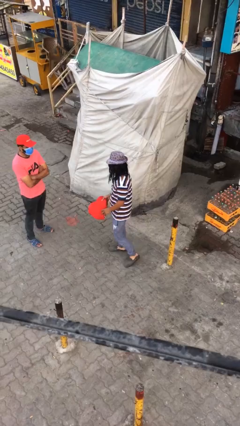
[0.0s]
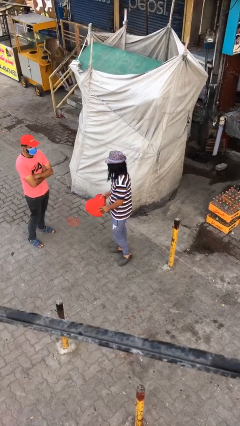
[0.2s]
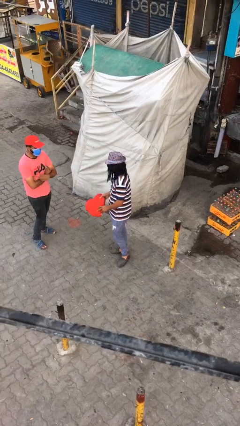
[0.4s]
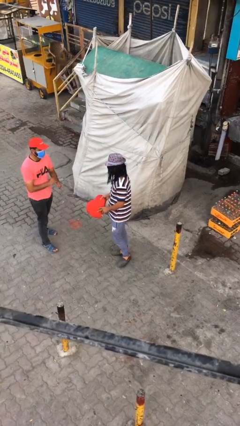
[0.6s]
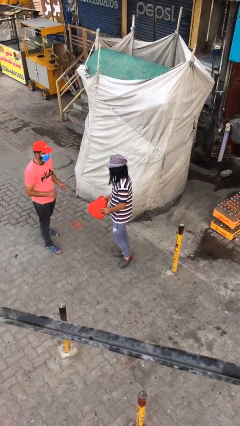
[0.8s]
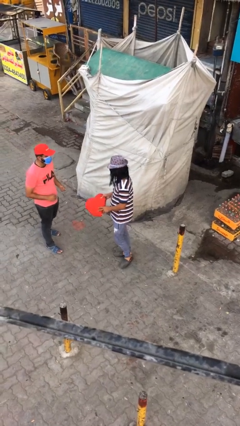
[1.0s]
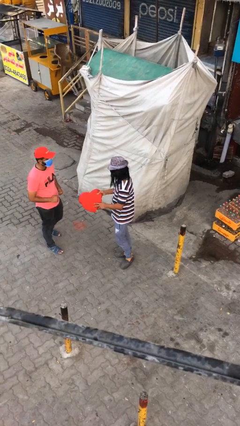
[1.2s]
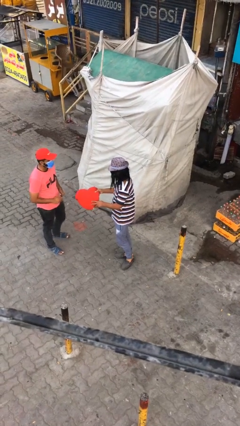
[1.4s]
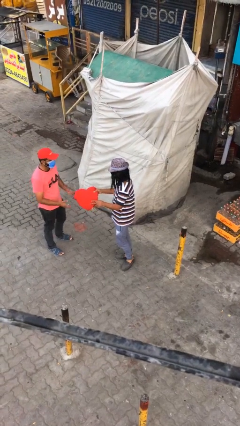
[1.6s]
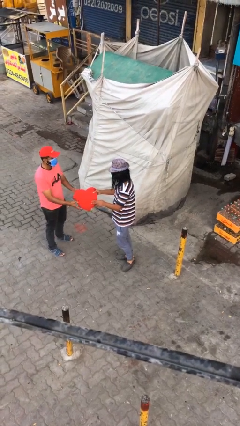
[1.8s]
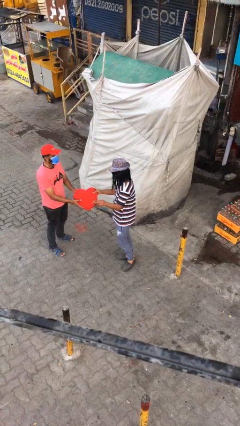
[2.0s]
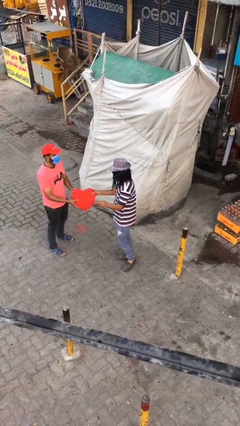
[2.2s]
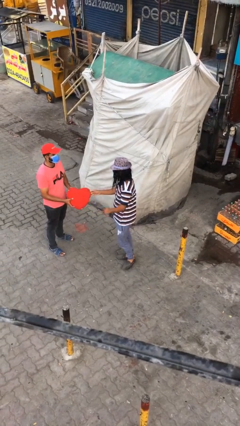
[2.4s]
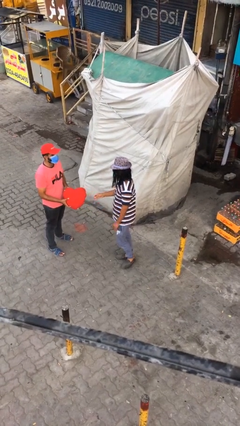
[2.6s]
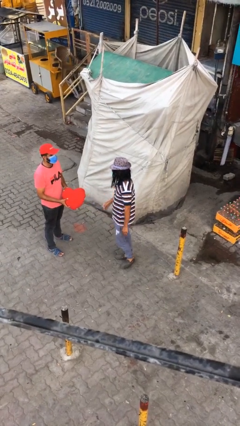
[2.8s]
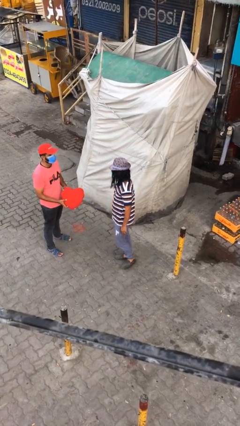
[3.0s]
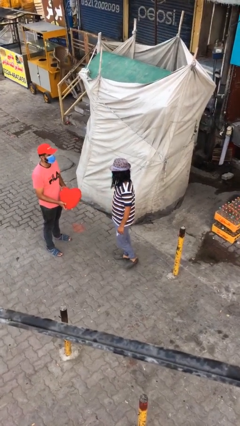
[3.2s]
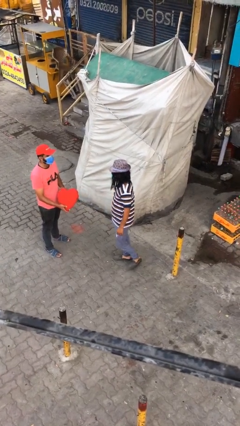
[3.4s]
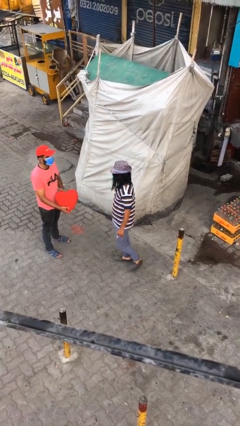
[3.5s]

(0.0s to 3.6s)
person transfers object to person

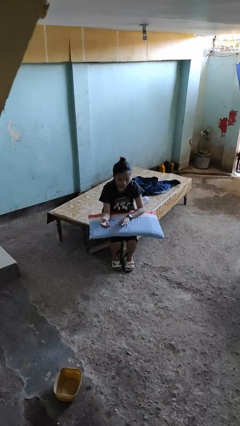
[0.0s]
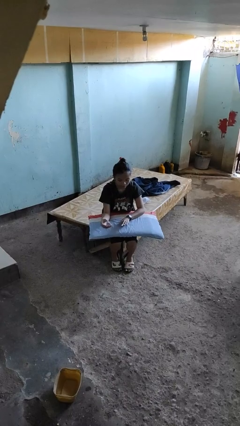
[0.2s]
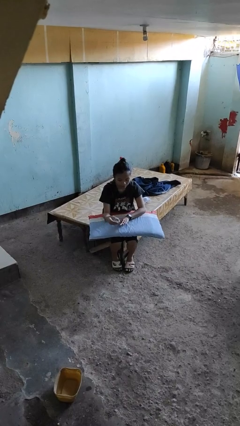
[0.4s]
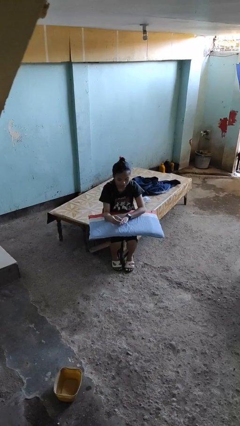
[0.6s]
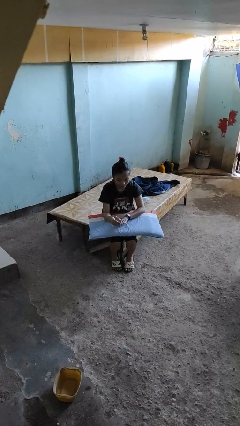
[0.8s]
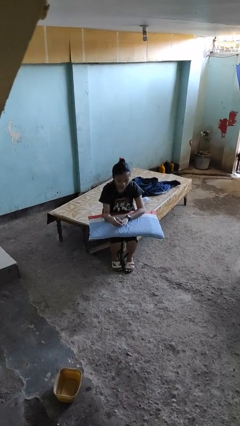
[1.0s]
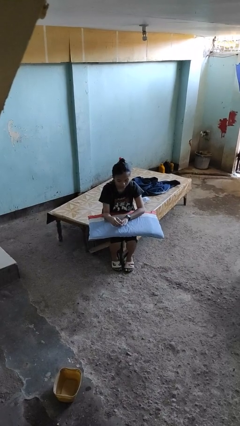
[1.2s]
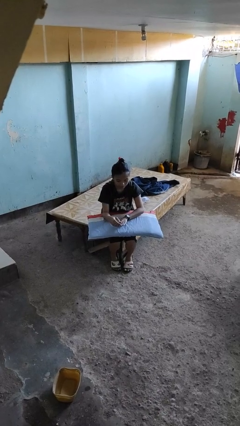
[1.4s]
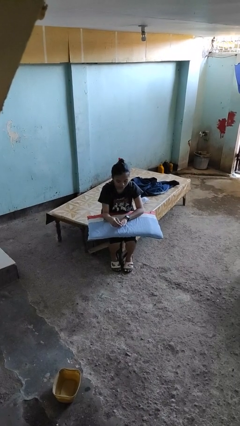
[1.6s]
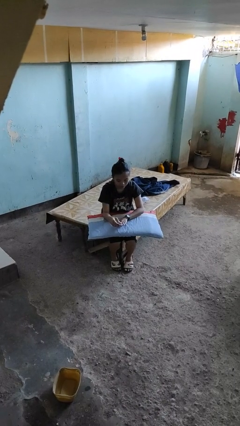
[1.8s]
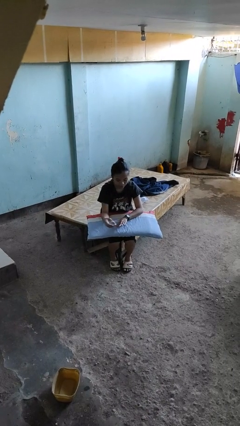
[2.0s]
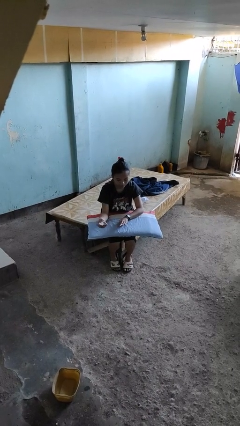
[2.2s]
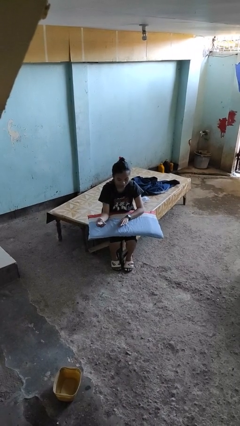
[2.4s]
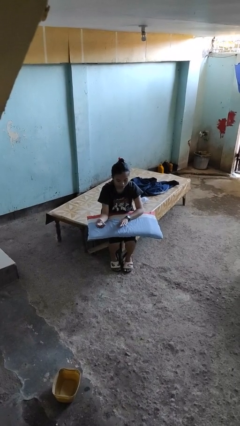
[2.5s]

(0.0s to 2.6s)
person clips fingernails

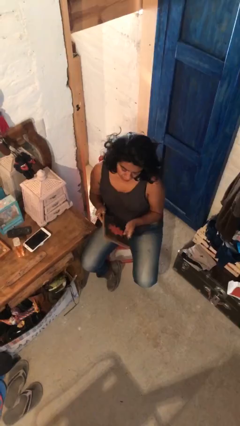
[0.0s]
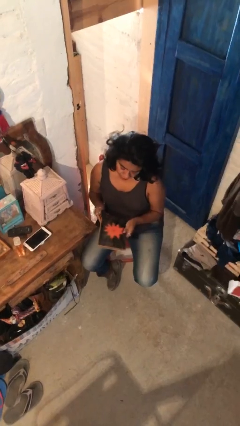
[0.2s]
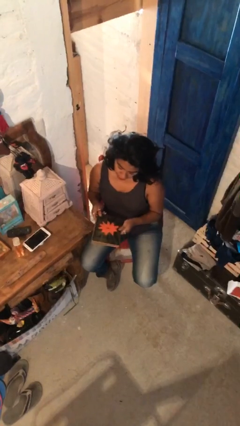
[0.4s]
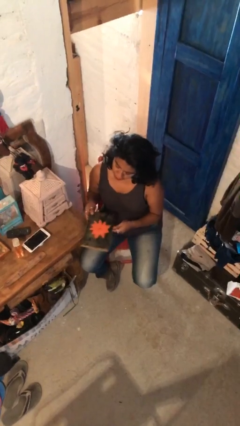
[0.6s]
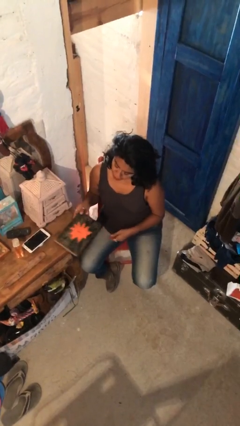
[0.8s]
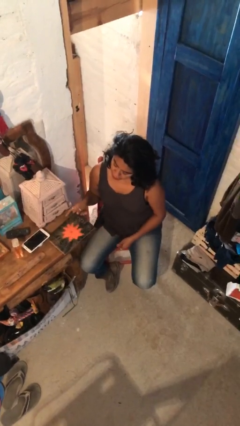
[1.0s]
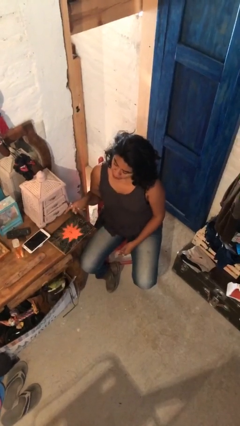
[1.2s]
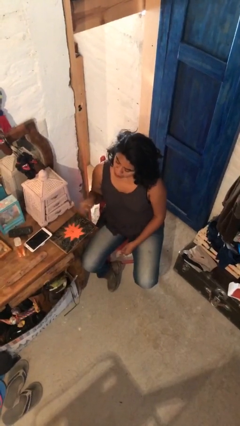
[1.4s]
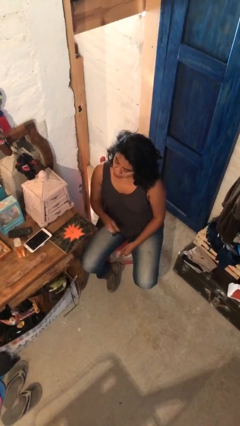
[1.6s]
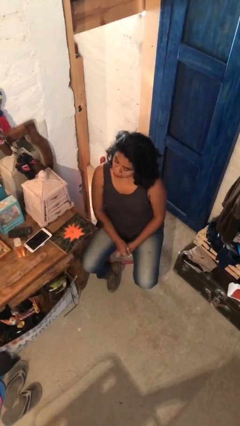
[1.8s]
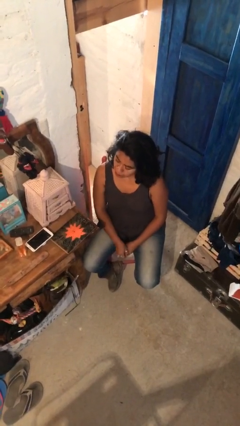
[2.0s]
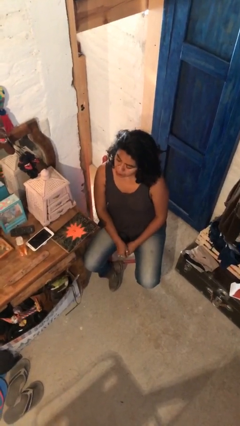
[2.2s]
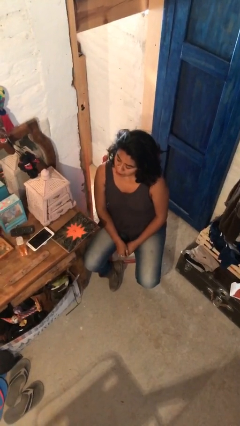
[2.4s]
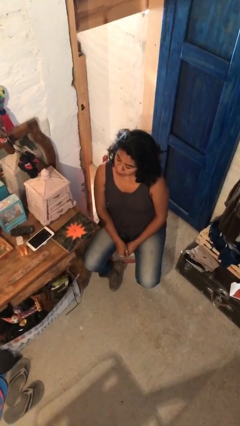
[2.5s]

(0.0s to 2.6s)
person puts down object on table

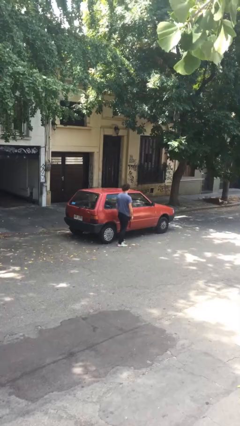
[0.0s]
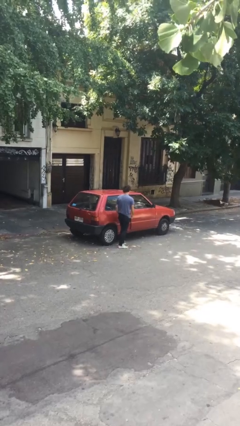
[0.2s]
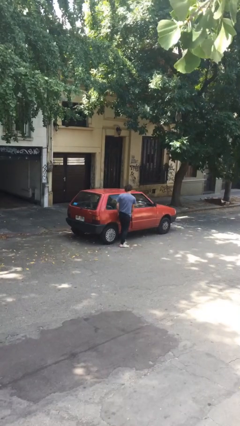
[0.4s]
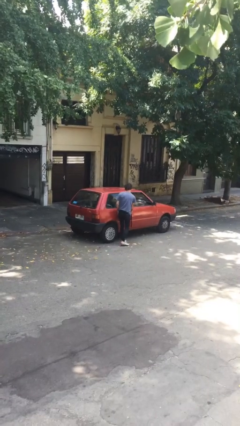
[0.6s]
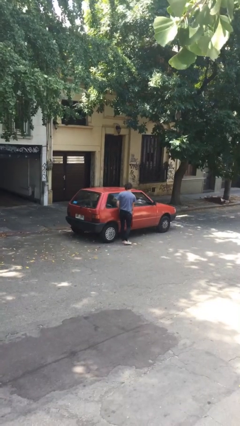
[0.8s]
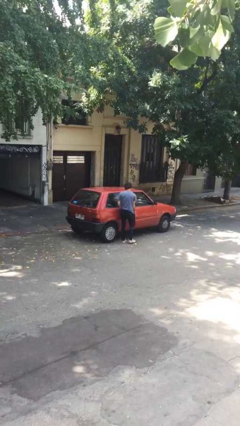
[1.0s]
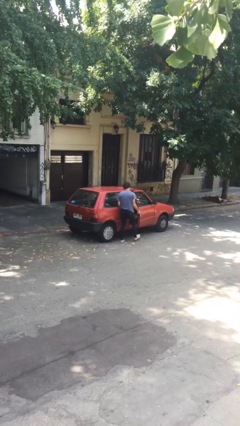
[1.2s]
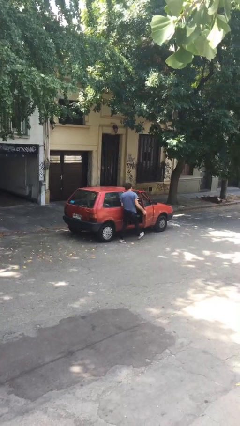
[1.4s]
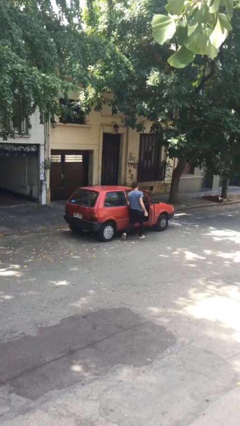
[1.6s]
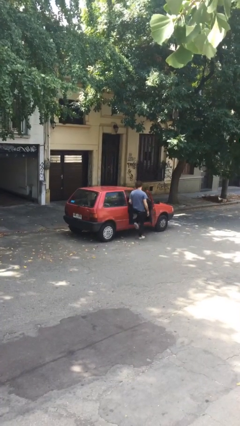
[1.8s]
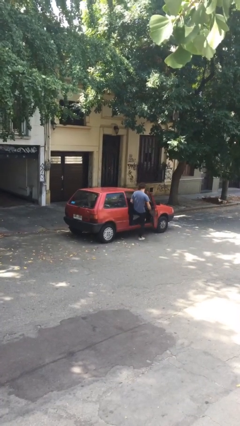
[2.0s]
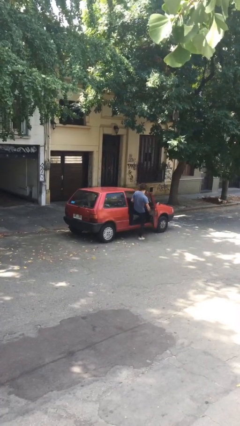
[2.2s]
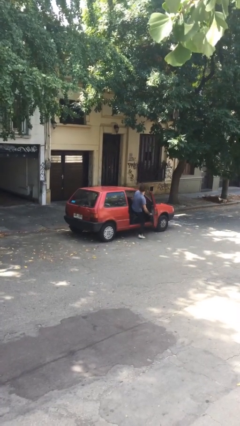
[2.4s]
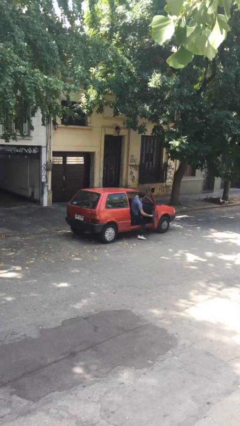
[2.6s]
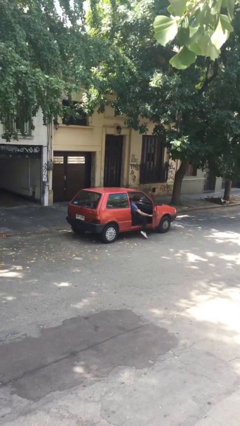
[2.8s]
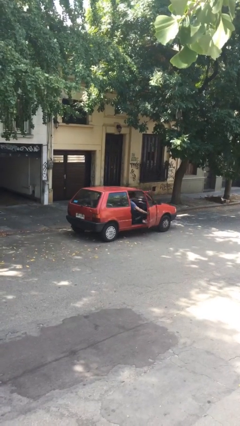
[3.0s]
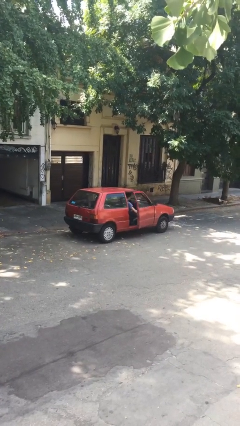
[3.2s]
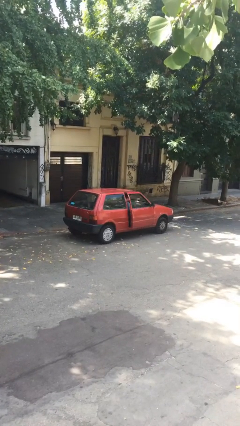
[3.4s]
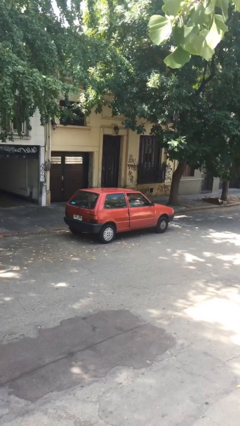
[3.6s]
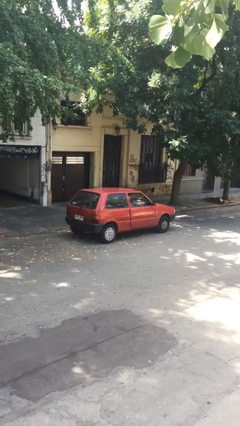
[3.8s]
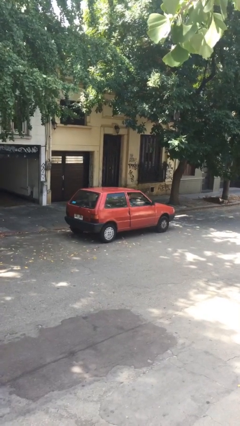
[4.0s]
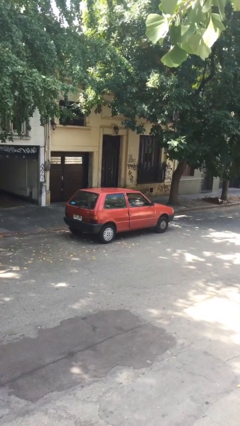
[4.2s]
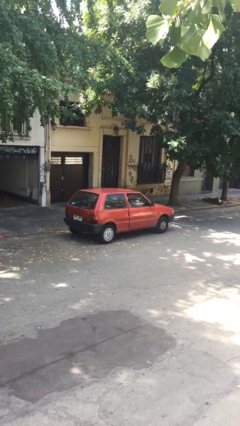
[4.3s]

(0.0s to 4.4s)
car picks up person

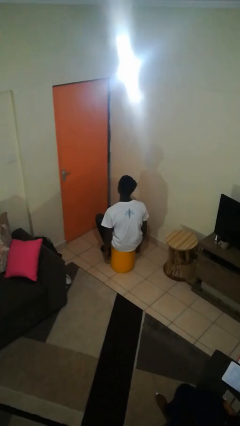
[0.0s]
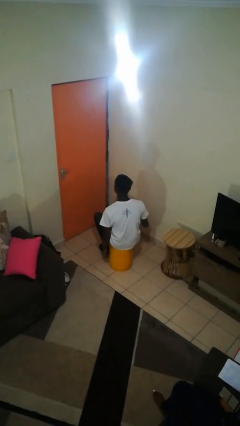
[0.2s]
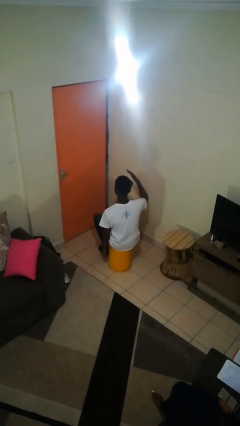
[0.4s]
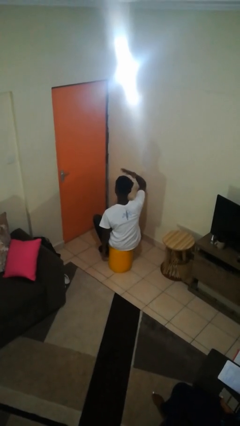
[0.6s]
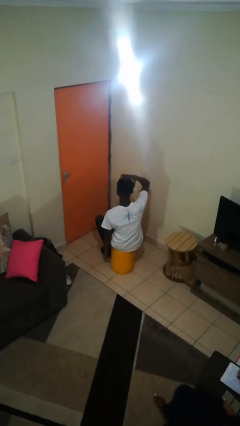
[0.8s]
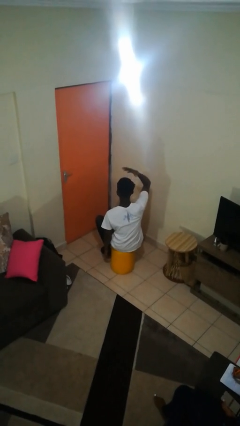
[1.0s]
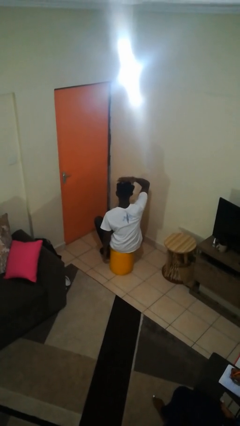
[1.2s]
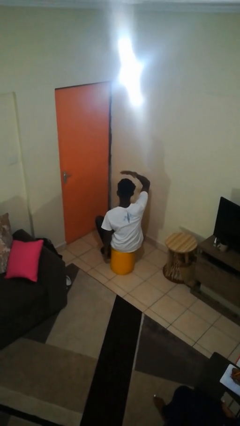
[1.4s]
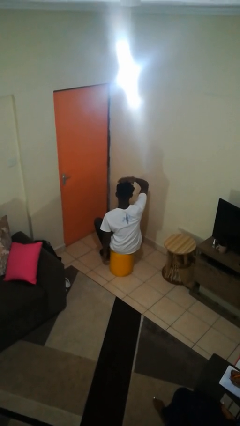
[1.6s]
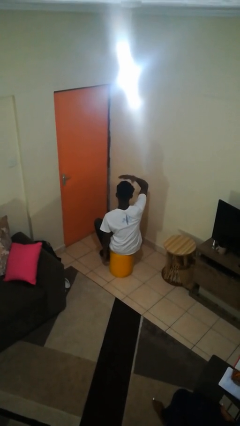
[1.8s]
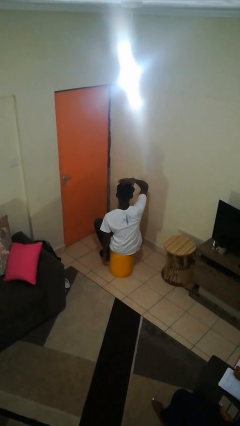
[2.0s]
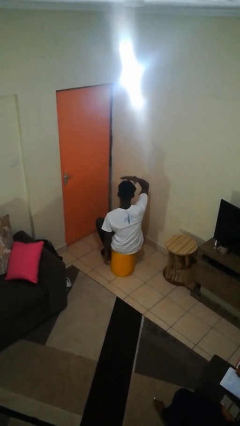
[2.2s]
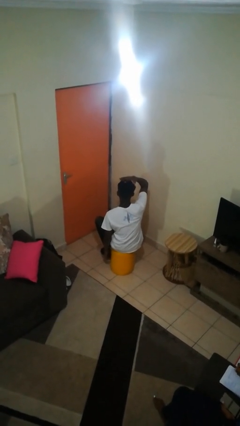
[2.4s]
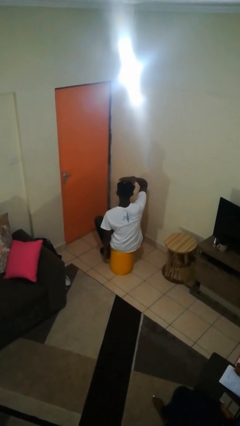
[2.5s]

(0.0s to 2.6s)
person pats head

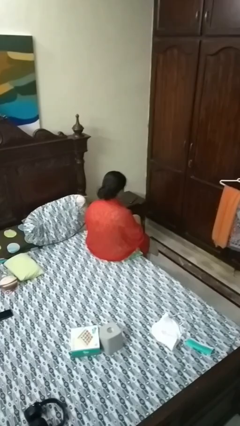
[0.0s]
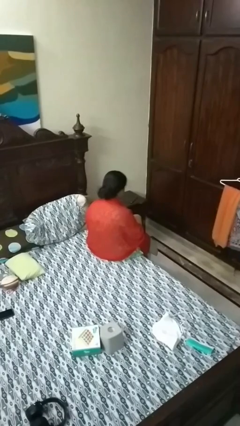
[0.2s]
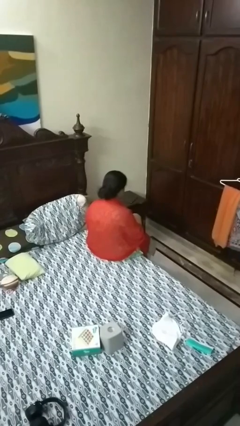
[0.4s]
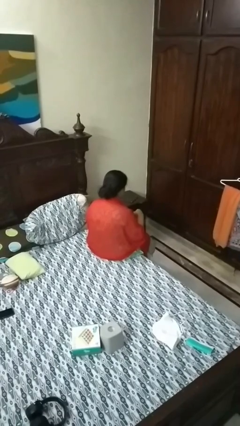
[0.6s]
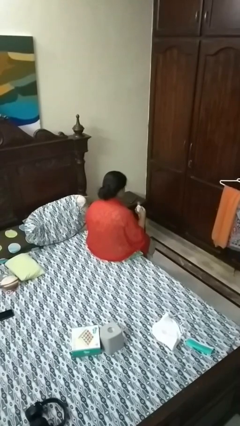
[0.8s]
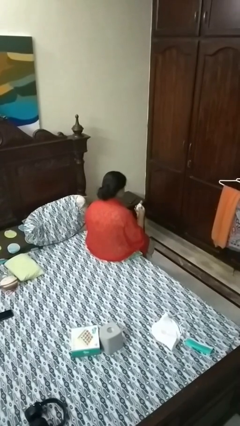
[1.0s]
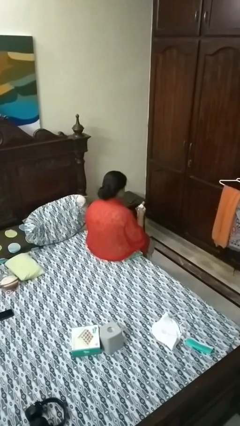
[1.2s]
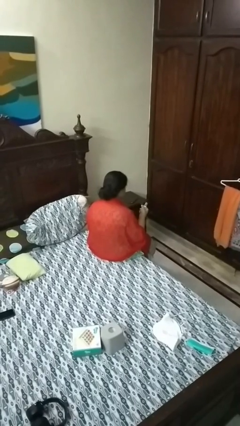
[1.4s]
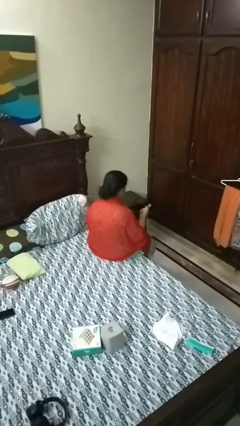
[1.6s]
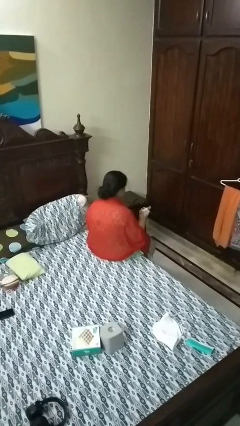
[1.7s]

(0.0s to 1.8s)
person takes object from purse
